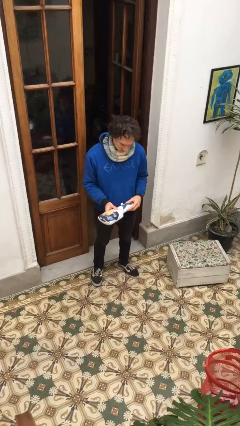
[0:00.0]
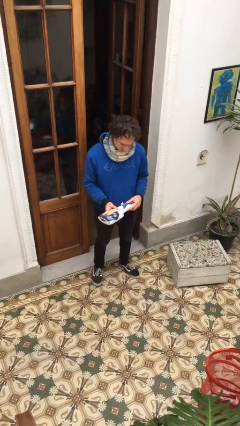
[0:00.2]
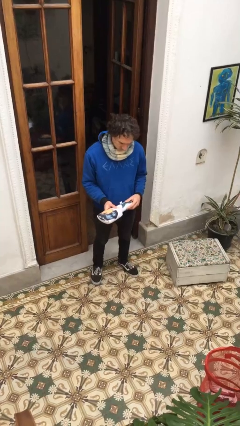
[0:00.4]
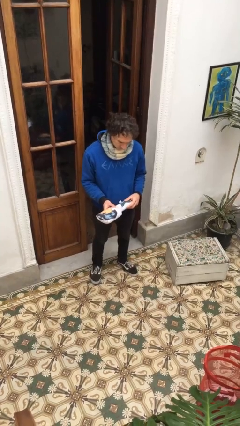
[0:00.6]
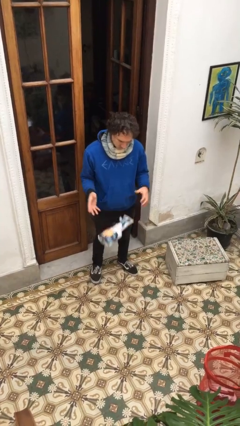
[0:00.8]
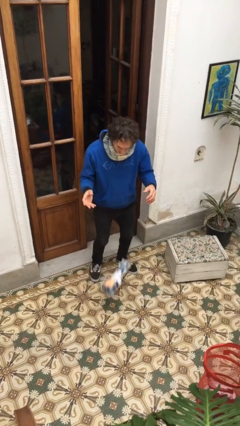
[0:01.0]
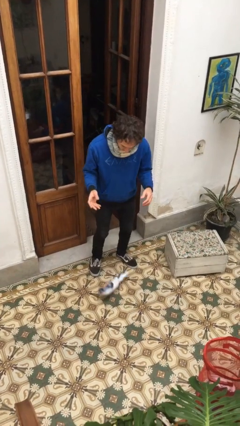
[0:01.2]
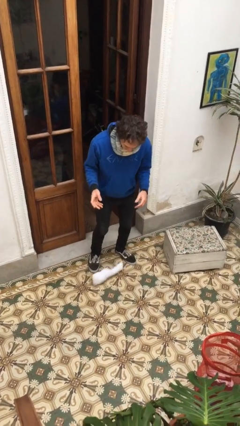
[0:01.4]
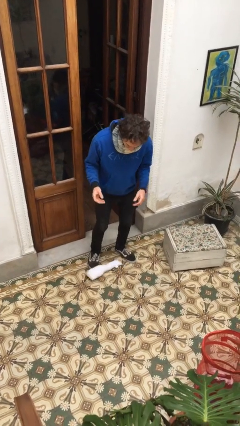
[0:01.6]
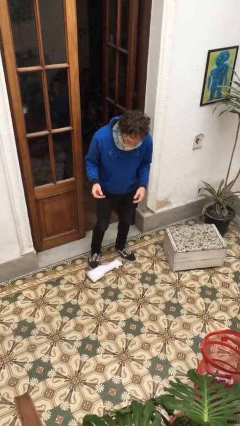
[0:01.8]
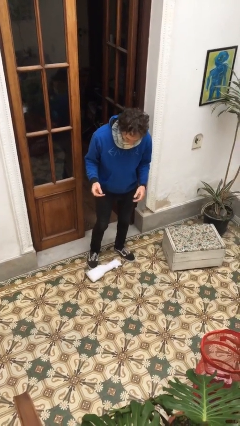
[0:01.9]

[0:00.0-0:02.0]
person drops object

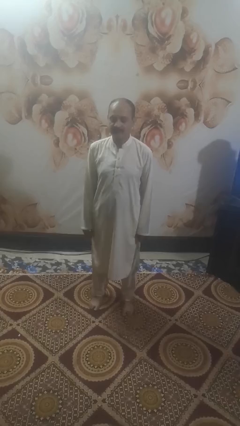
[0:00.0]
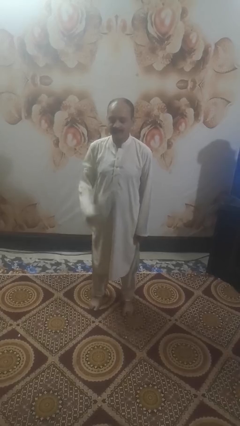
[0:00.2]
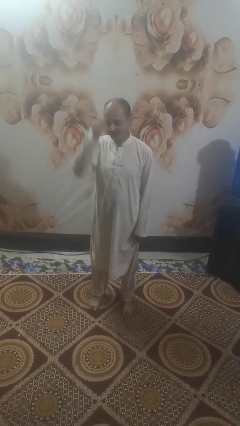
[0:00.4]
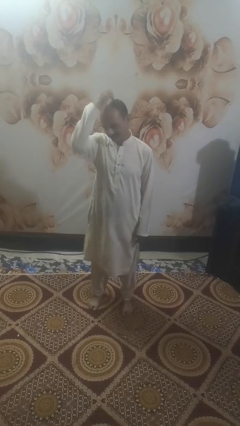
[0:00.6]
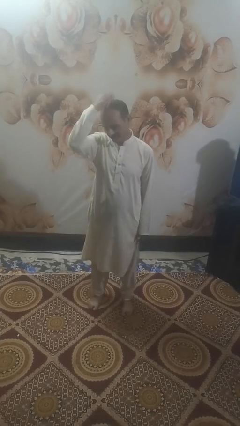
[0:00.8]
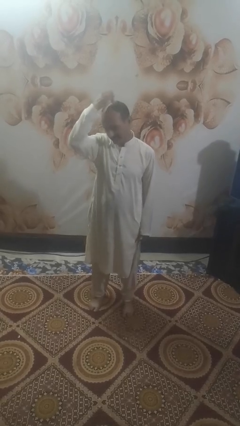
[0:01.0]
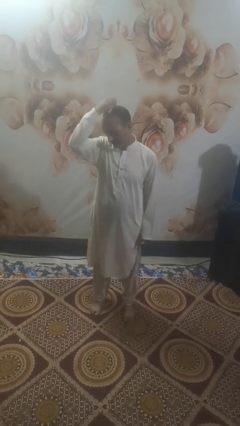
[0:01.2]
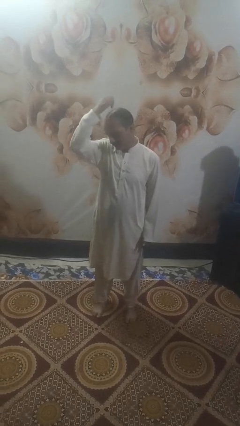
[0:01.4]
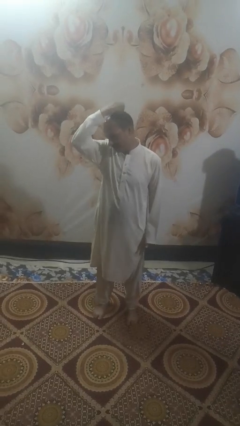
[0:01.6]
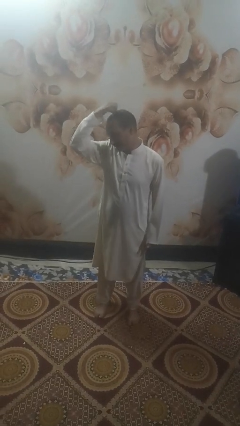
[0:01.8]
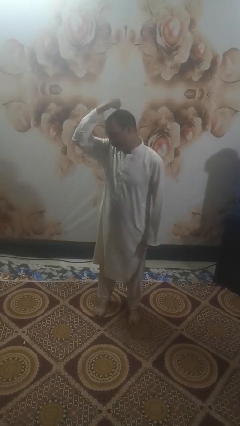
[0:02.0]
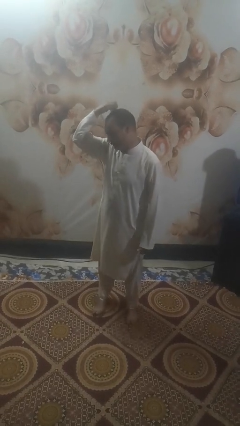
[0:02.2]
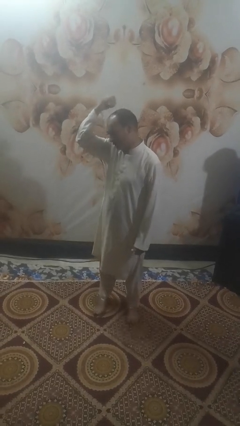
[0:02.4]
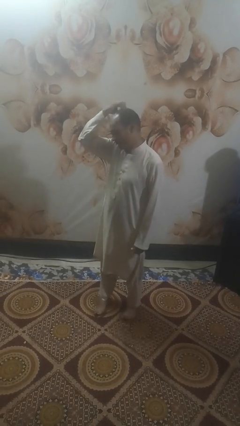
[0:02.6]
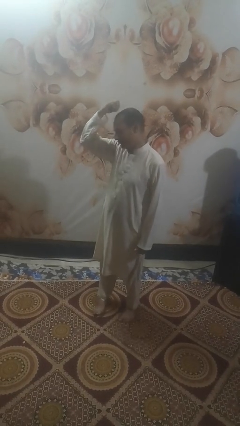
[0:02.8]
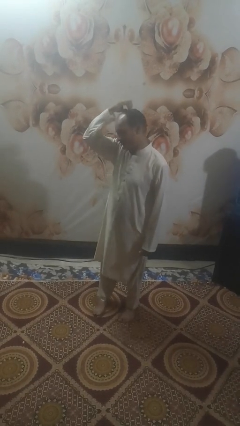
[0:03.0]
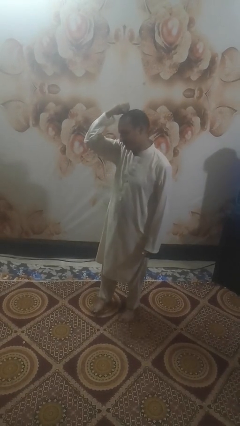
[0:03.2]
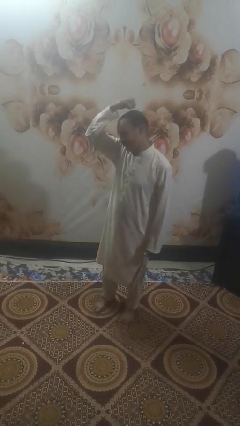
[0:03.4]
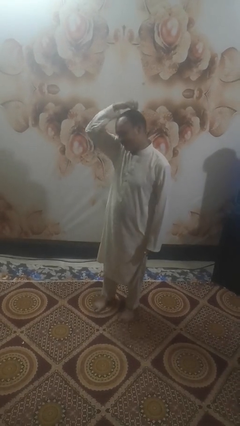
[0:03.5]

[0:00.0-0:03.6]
person scratches face

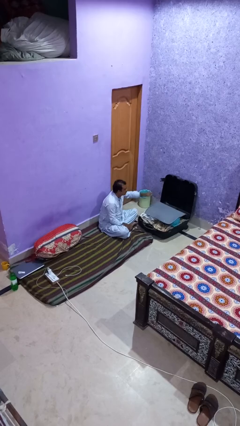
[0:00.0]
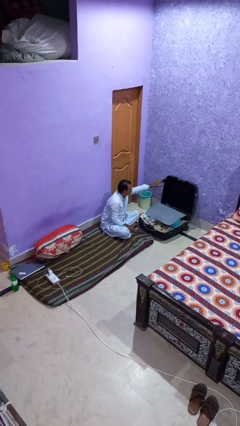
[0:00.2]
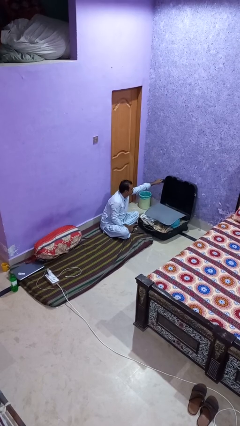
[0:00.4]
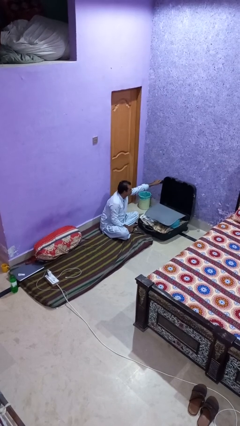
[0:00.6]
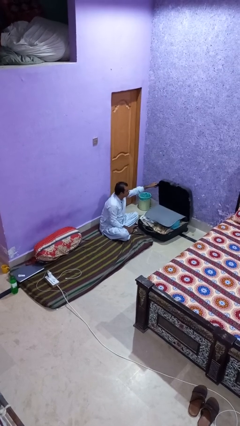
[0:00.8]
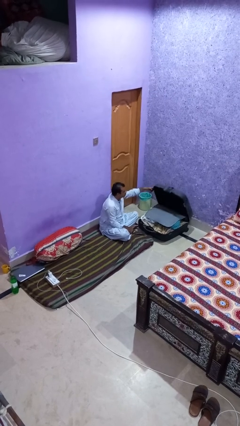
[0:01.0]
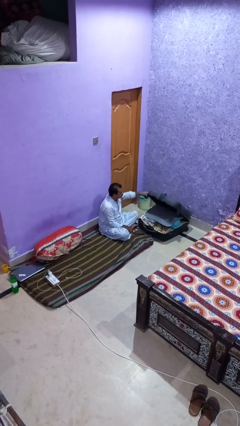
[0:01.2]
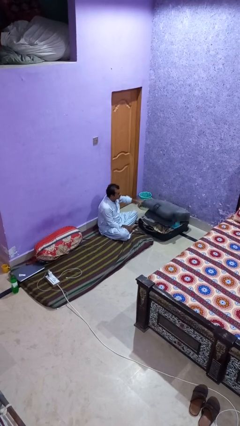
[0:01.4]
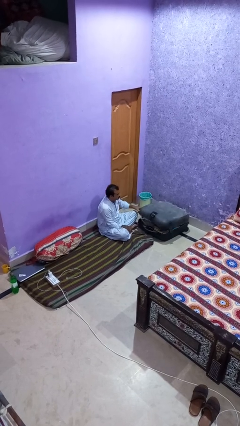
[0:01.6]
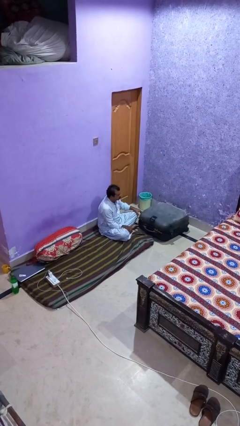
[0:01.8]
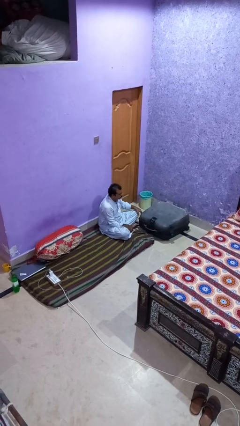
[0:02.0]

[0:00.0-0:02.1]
person closes suitcase

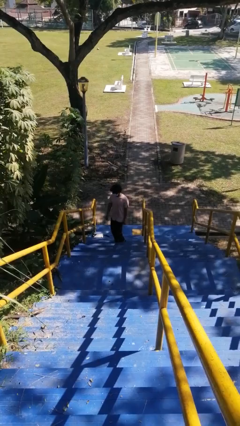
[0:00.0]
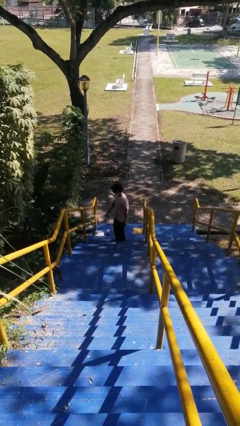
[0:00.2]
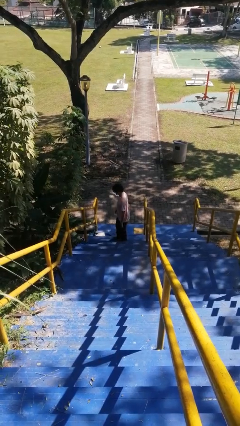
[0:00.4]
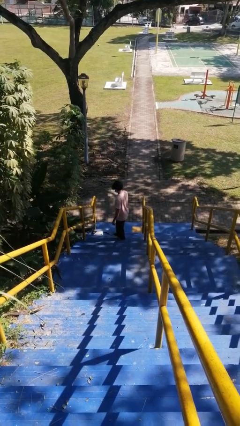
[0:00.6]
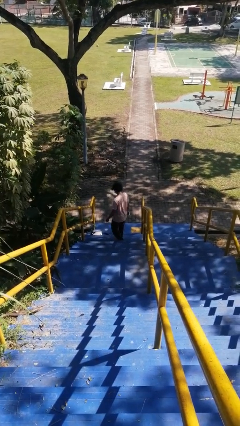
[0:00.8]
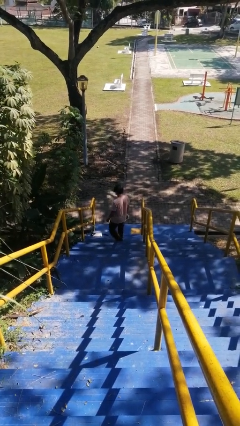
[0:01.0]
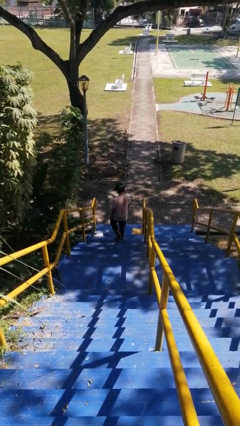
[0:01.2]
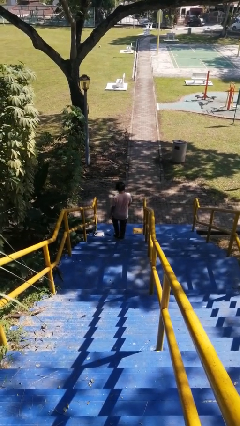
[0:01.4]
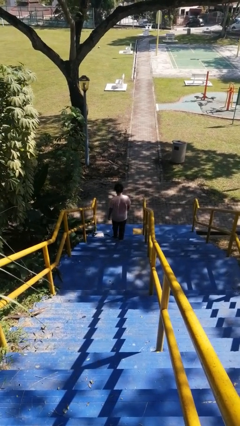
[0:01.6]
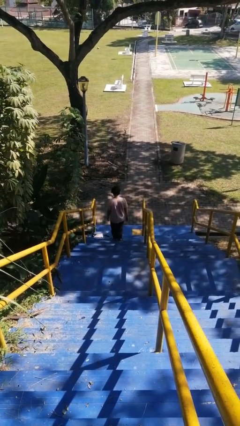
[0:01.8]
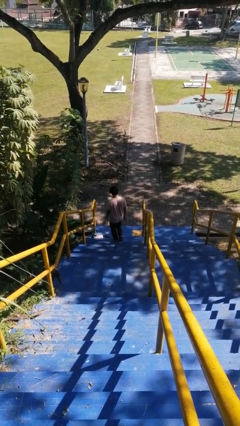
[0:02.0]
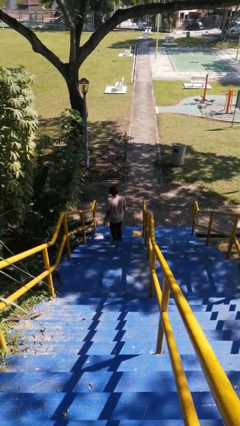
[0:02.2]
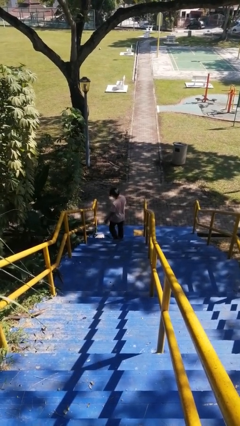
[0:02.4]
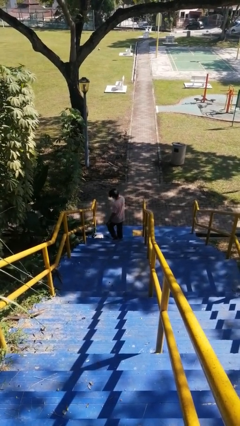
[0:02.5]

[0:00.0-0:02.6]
person climbs down stairs

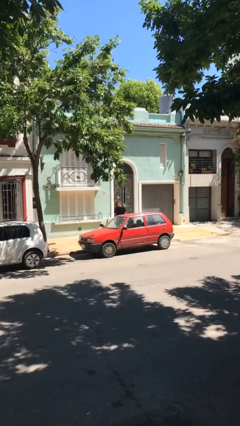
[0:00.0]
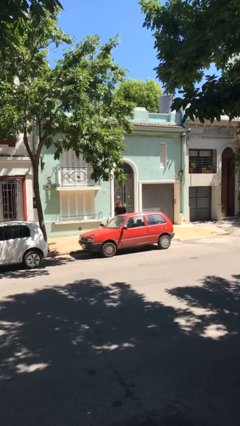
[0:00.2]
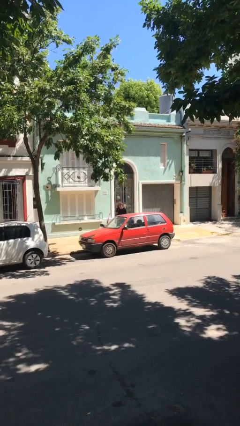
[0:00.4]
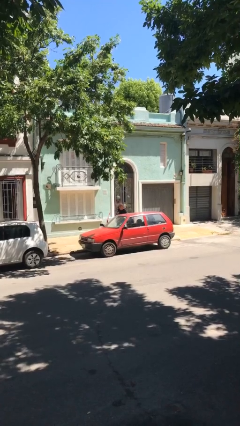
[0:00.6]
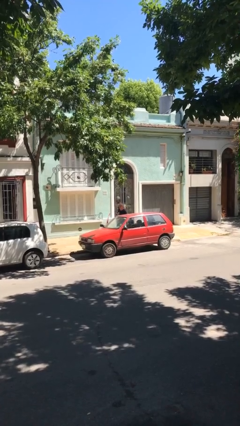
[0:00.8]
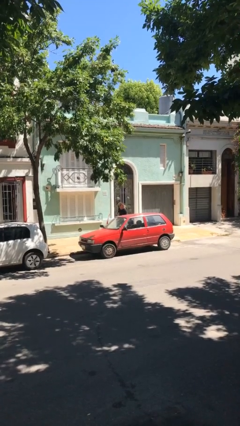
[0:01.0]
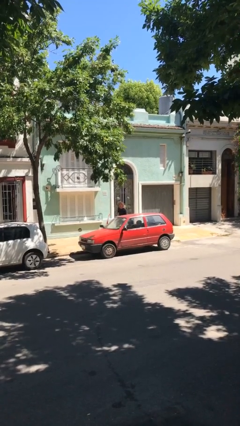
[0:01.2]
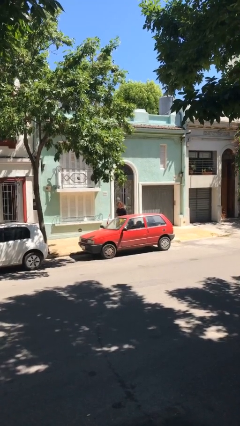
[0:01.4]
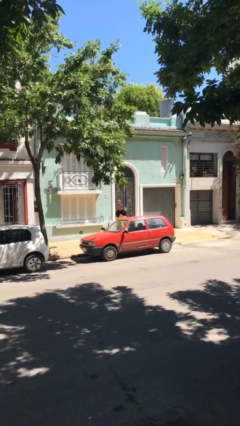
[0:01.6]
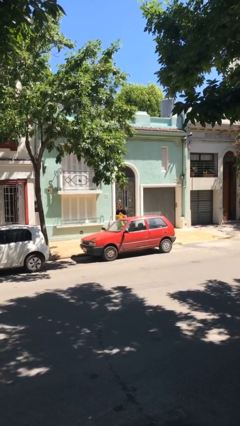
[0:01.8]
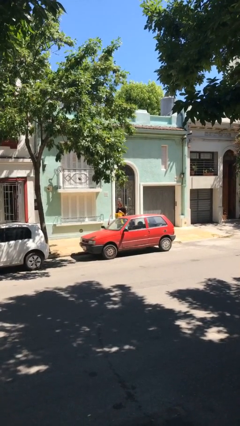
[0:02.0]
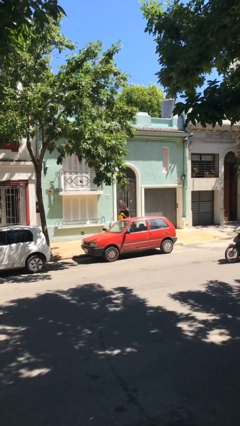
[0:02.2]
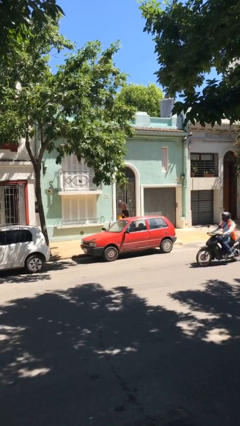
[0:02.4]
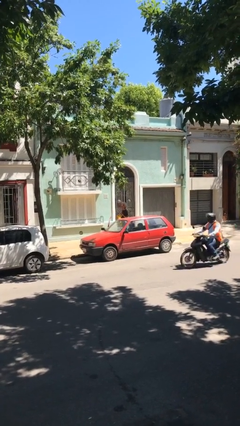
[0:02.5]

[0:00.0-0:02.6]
person unloads car

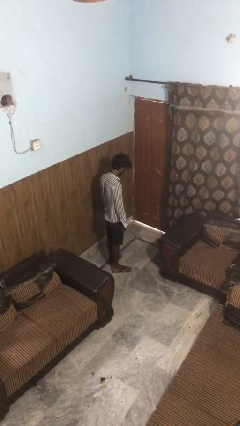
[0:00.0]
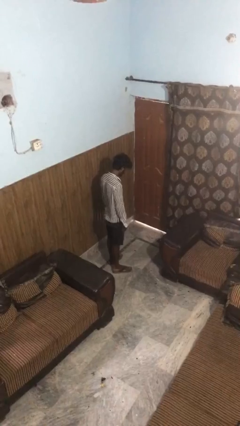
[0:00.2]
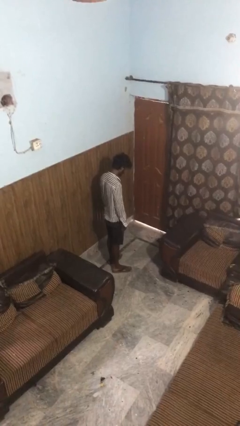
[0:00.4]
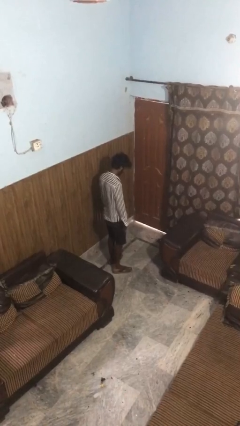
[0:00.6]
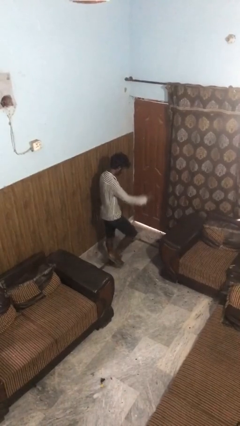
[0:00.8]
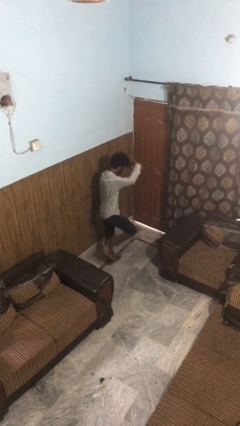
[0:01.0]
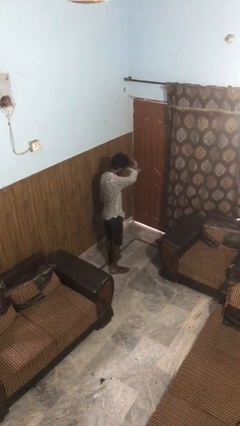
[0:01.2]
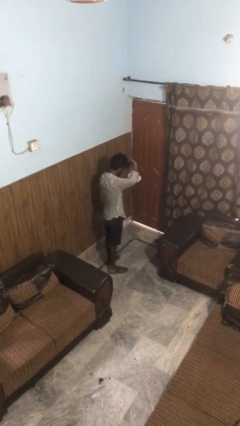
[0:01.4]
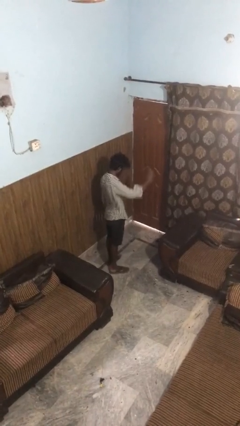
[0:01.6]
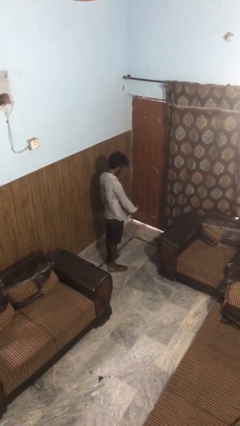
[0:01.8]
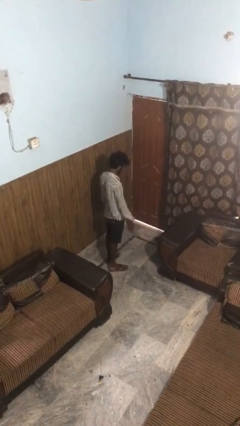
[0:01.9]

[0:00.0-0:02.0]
person salutes

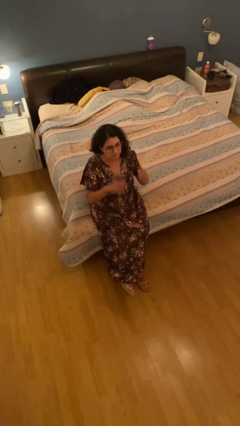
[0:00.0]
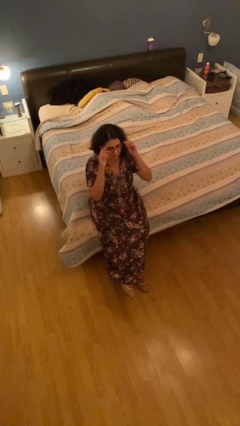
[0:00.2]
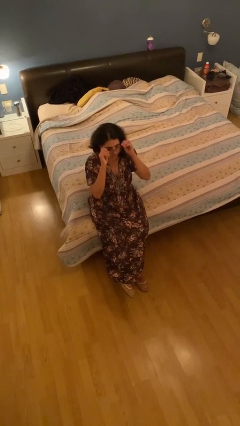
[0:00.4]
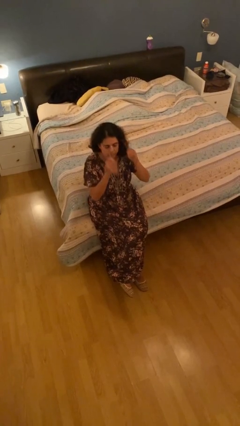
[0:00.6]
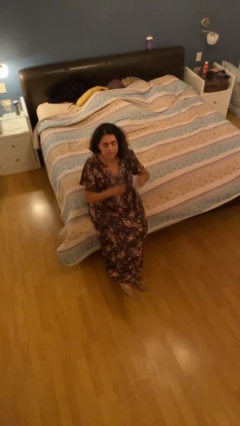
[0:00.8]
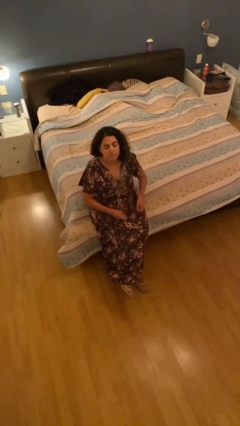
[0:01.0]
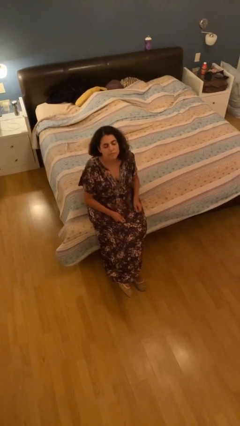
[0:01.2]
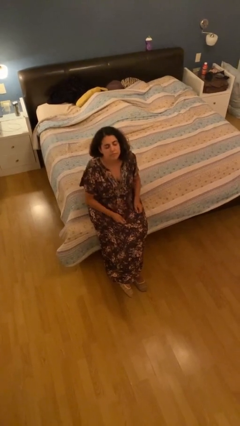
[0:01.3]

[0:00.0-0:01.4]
person takes off glasses

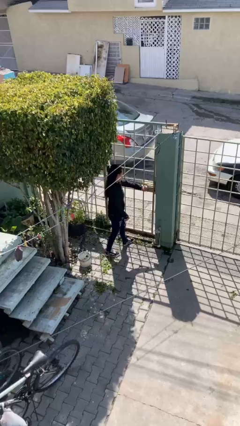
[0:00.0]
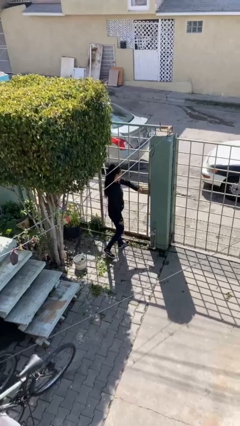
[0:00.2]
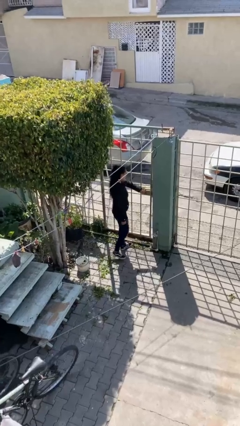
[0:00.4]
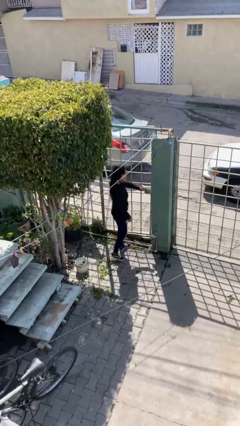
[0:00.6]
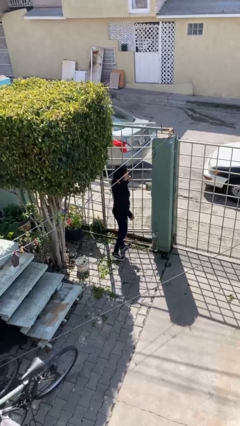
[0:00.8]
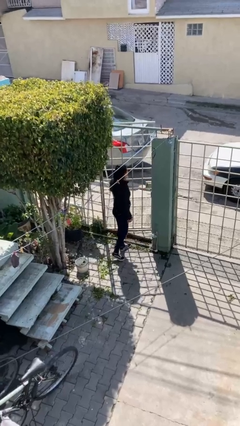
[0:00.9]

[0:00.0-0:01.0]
person opens facility door
